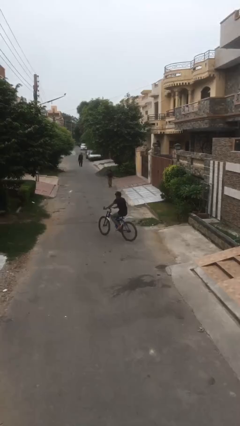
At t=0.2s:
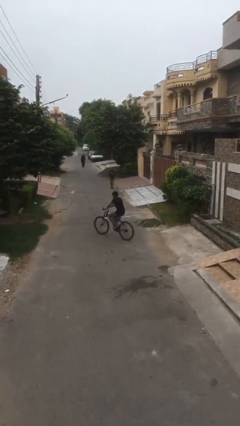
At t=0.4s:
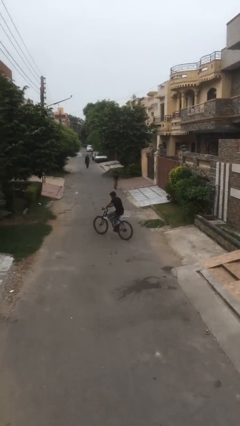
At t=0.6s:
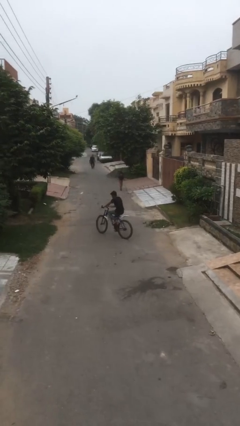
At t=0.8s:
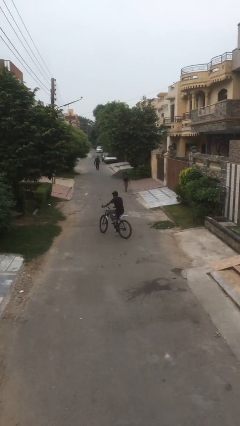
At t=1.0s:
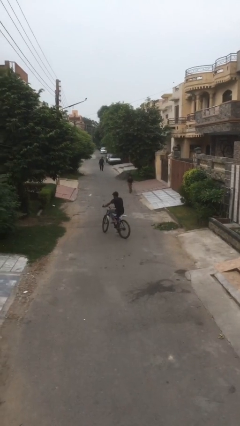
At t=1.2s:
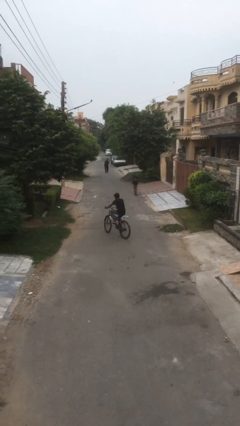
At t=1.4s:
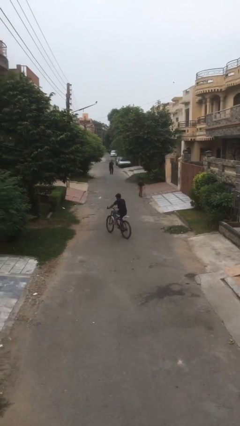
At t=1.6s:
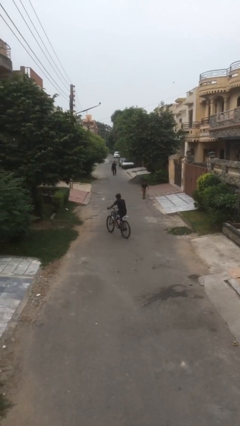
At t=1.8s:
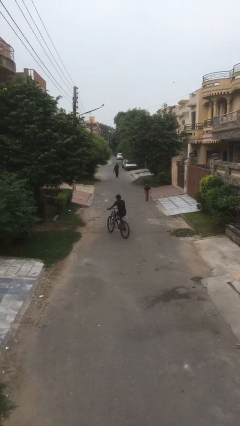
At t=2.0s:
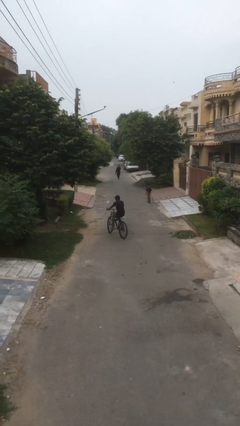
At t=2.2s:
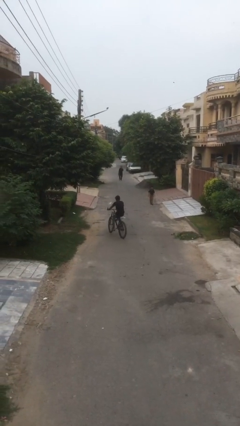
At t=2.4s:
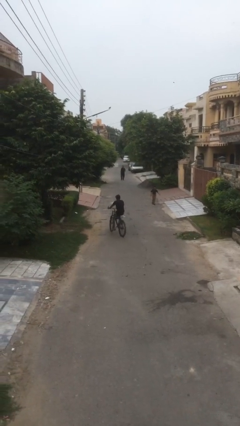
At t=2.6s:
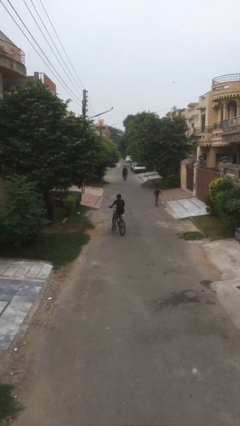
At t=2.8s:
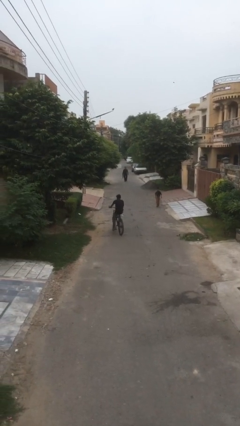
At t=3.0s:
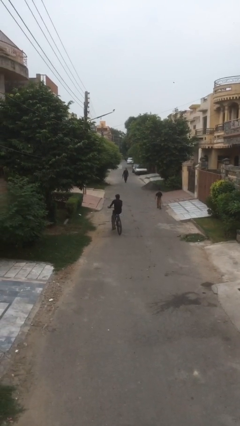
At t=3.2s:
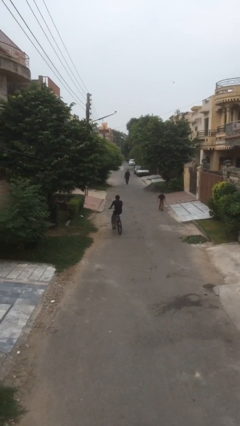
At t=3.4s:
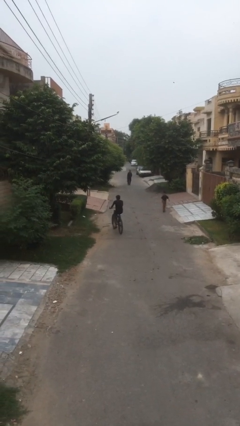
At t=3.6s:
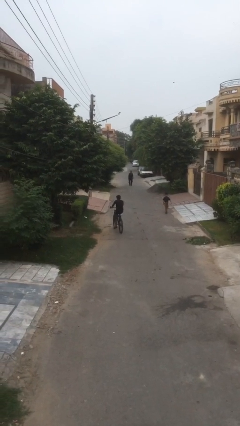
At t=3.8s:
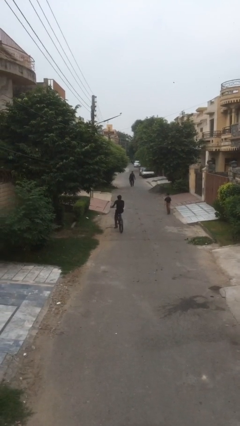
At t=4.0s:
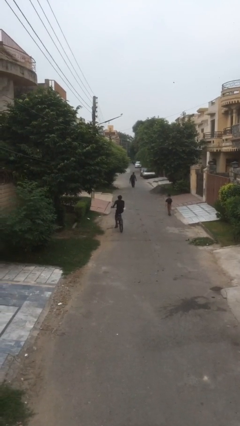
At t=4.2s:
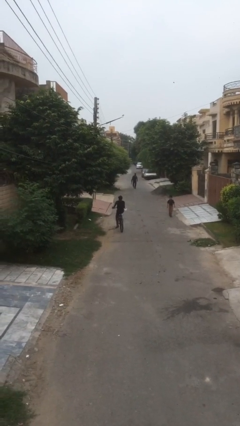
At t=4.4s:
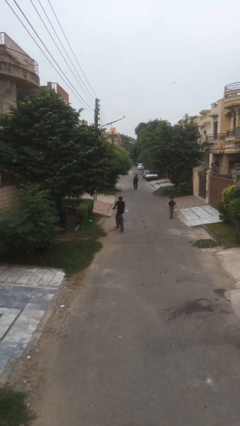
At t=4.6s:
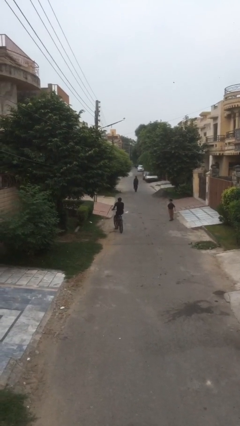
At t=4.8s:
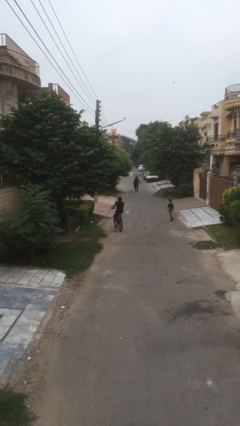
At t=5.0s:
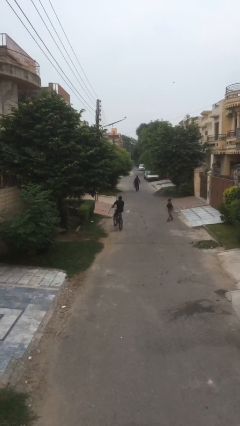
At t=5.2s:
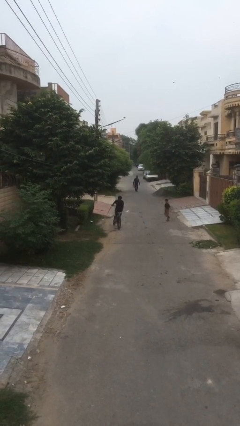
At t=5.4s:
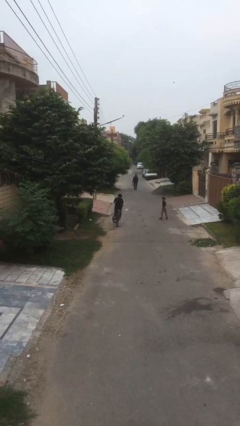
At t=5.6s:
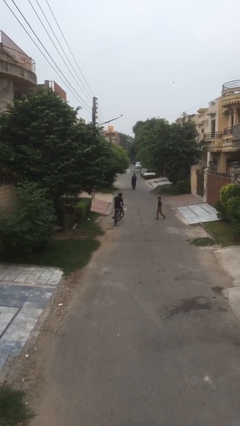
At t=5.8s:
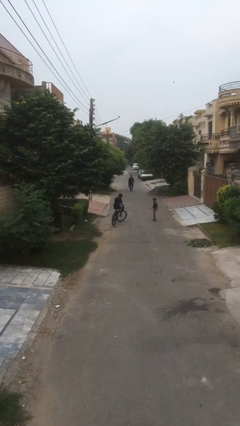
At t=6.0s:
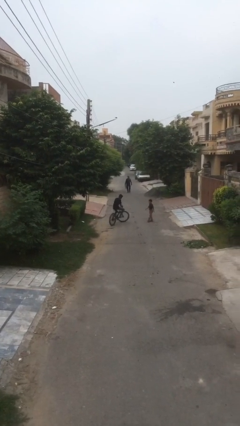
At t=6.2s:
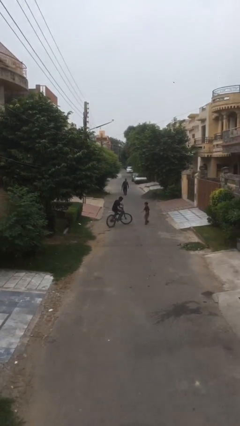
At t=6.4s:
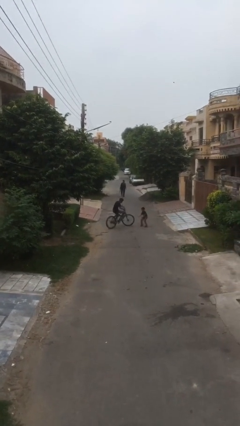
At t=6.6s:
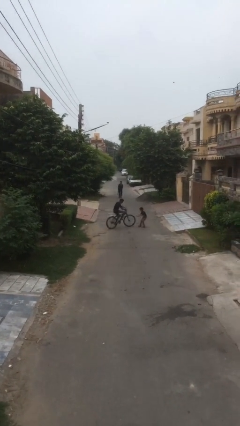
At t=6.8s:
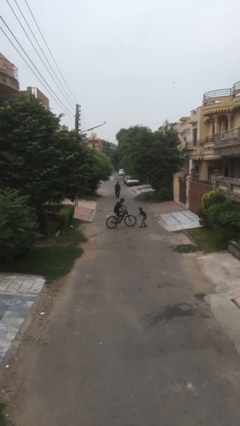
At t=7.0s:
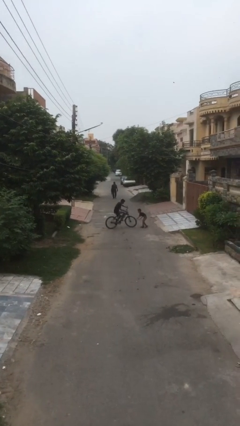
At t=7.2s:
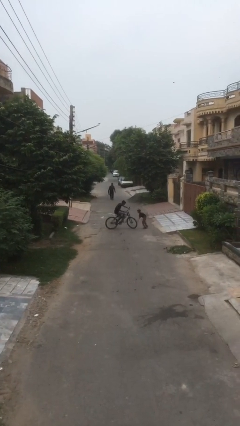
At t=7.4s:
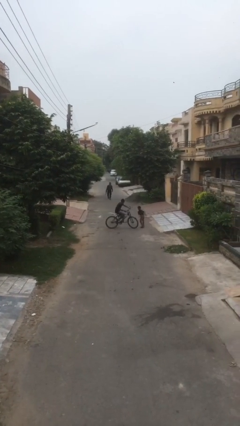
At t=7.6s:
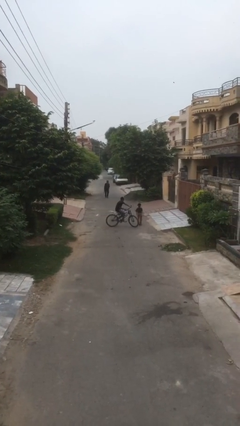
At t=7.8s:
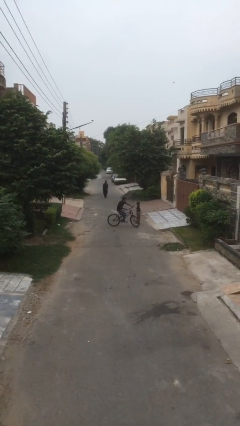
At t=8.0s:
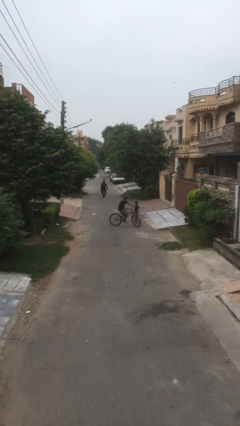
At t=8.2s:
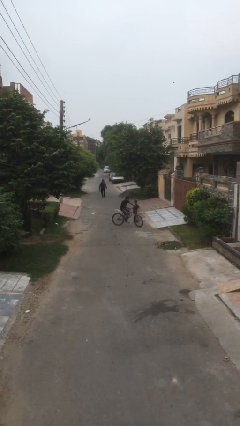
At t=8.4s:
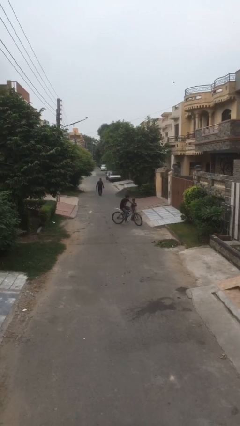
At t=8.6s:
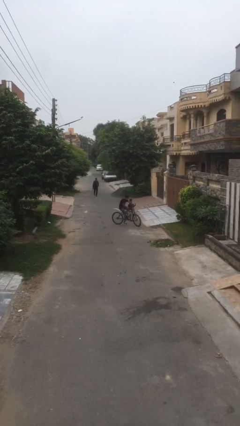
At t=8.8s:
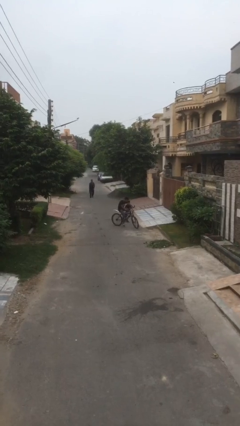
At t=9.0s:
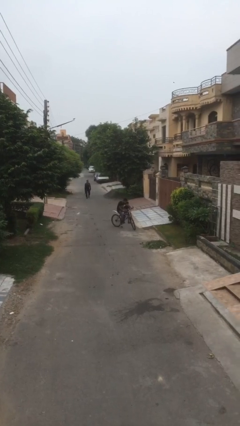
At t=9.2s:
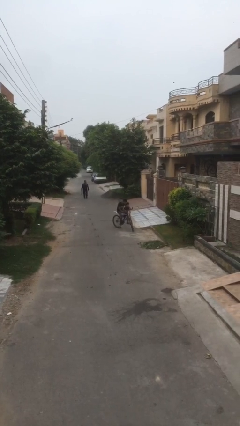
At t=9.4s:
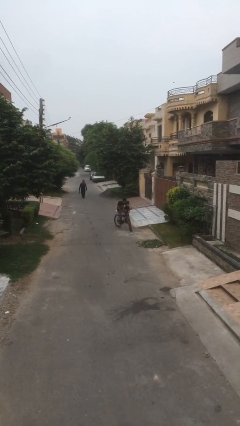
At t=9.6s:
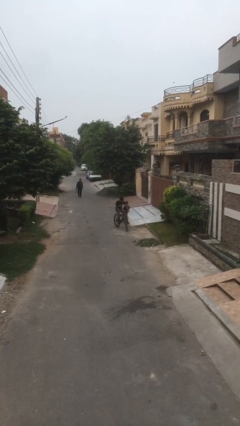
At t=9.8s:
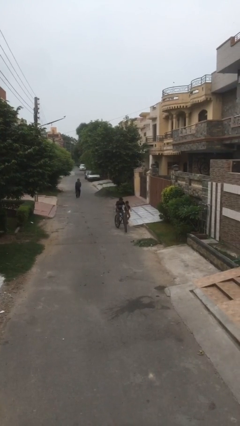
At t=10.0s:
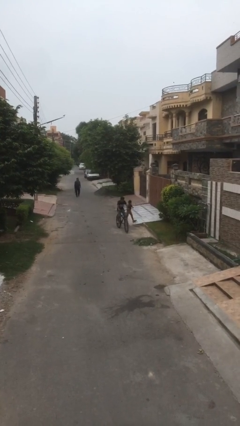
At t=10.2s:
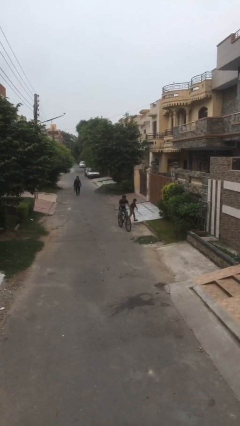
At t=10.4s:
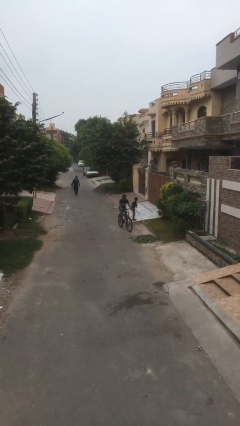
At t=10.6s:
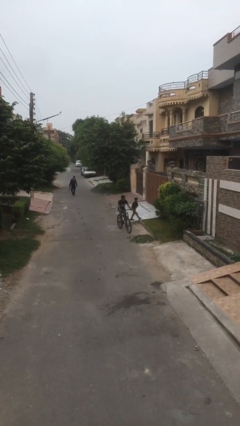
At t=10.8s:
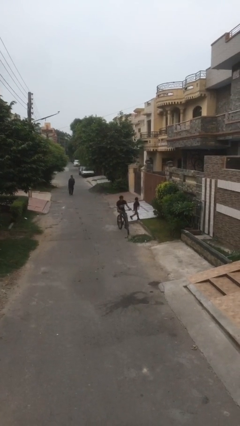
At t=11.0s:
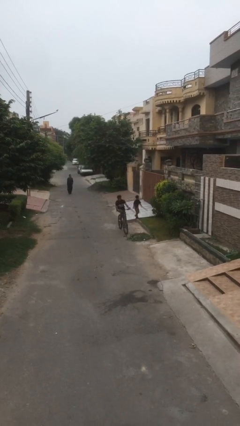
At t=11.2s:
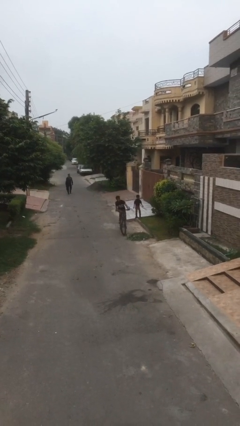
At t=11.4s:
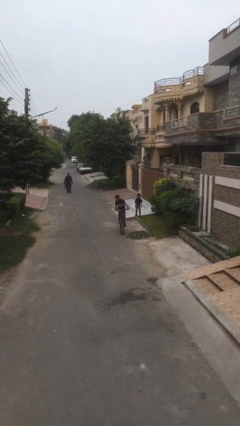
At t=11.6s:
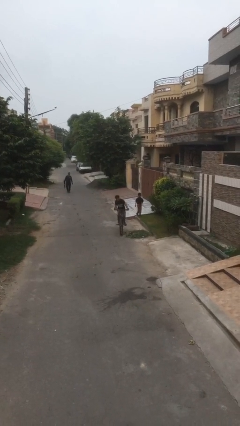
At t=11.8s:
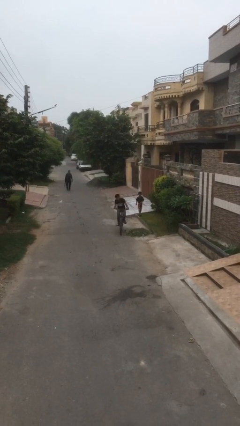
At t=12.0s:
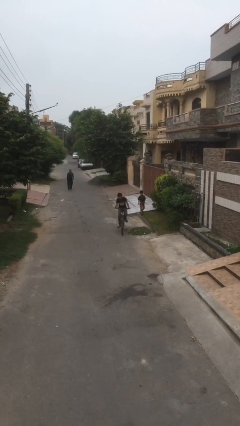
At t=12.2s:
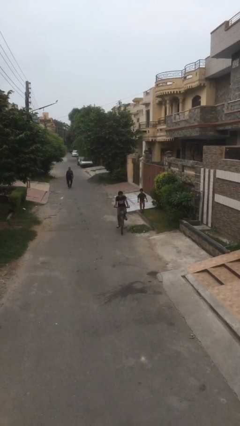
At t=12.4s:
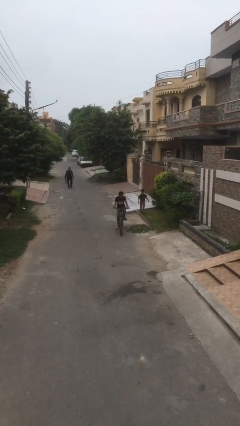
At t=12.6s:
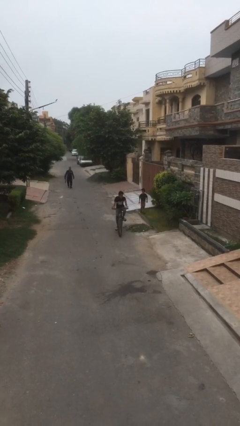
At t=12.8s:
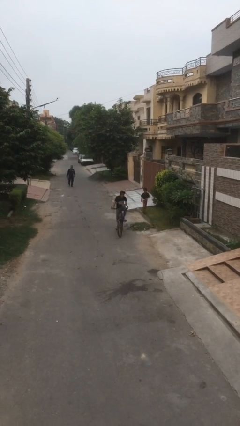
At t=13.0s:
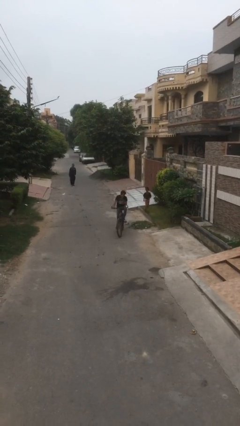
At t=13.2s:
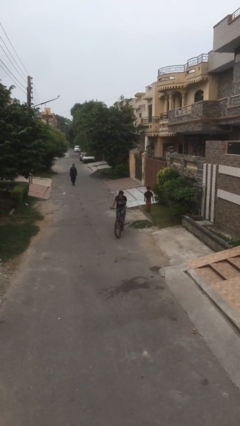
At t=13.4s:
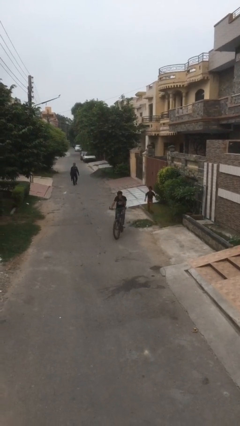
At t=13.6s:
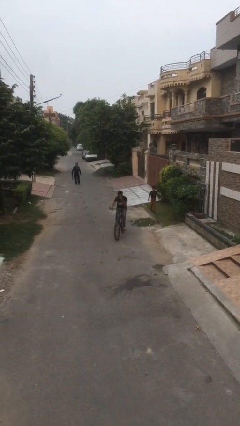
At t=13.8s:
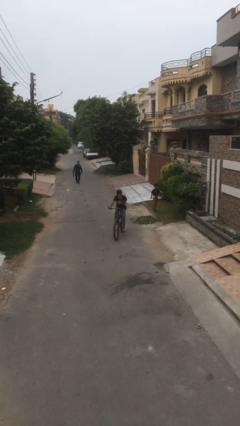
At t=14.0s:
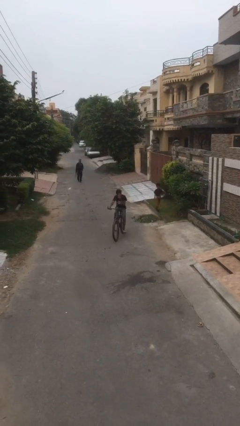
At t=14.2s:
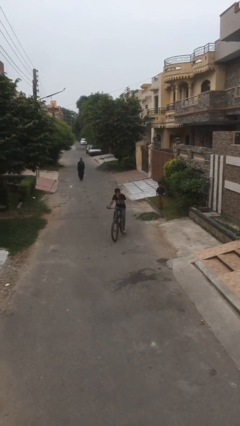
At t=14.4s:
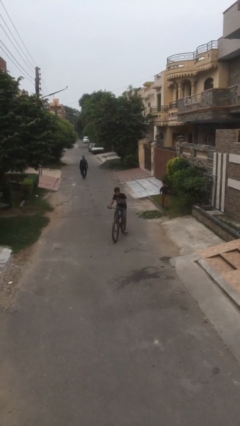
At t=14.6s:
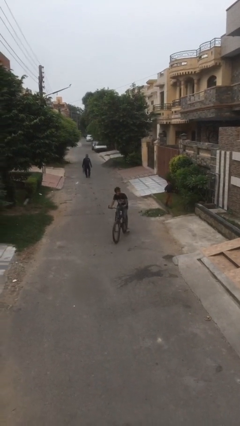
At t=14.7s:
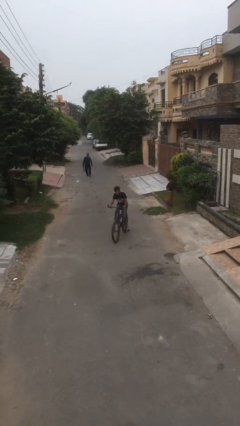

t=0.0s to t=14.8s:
person rides bicycle

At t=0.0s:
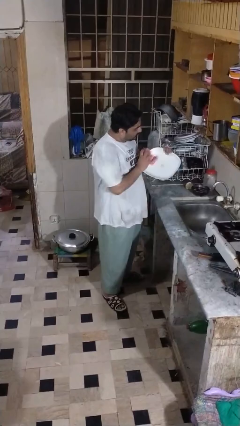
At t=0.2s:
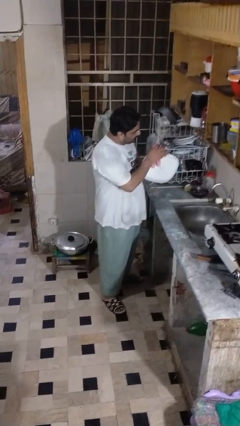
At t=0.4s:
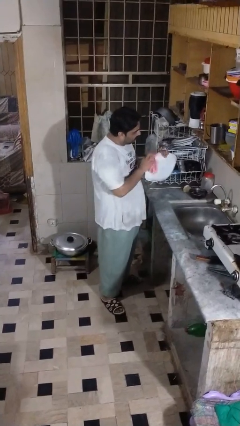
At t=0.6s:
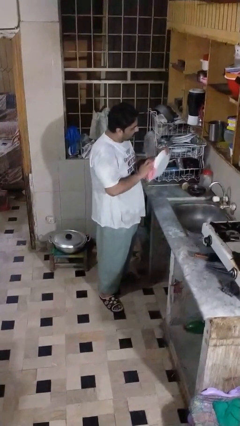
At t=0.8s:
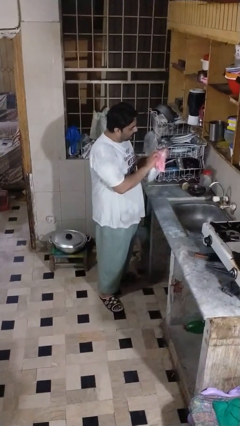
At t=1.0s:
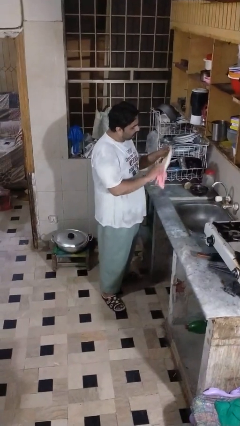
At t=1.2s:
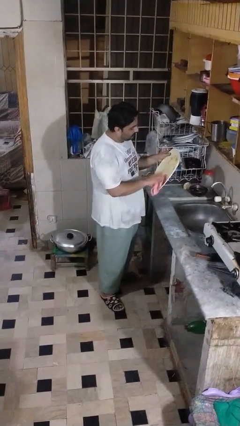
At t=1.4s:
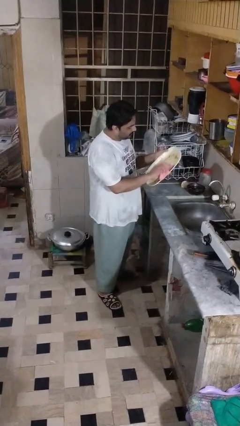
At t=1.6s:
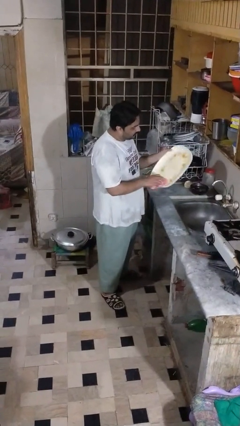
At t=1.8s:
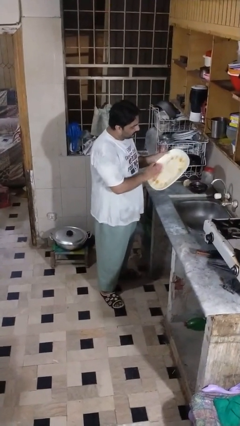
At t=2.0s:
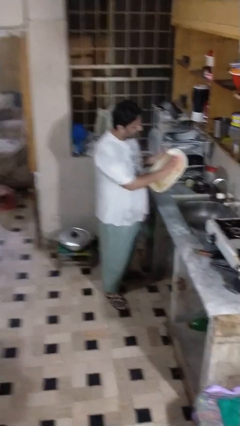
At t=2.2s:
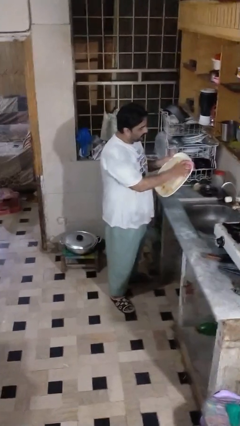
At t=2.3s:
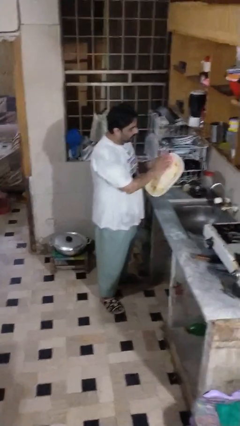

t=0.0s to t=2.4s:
person dries dish

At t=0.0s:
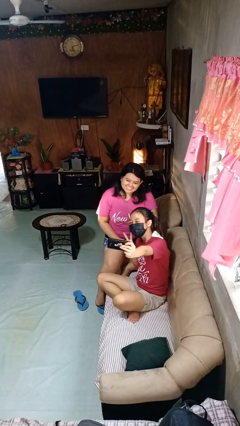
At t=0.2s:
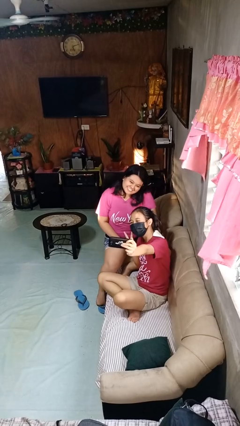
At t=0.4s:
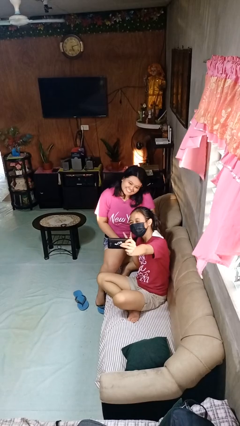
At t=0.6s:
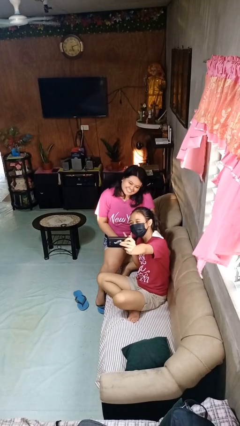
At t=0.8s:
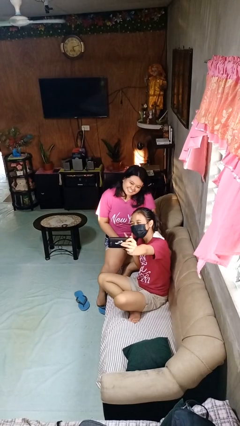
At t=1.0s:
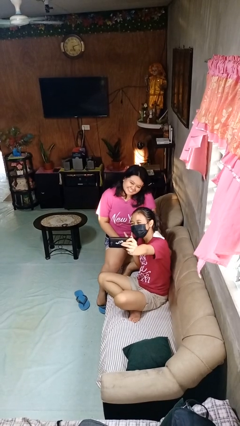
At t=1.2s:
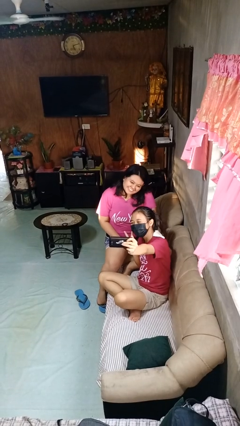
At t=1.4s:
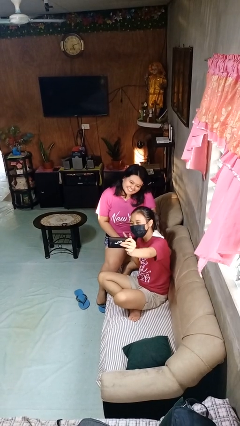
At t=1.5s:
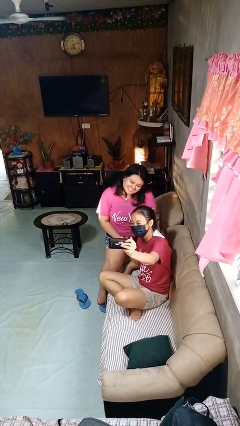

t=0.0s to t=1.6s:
person takes selfie with person
